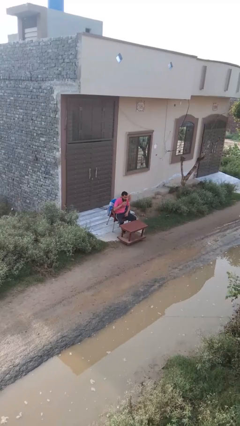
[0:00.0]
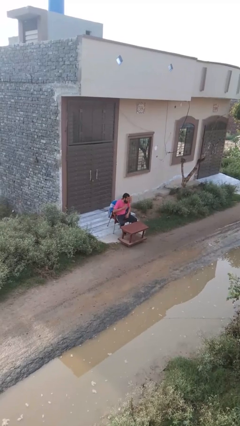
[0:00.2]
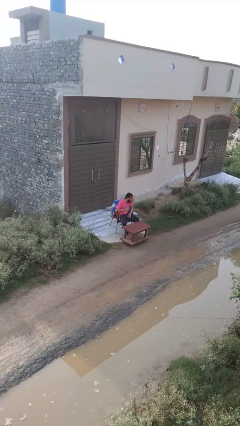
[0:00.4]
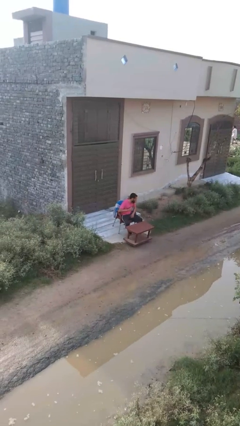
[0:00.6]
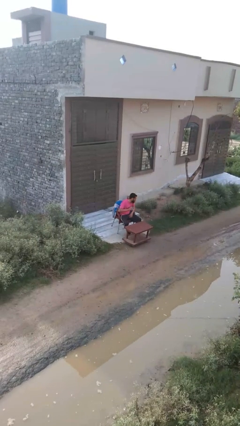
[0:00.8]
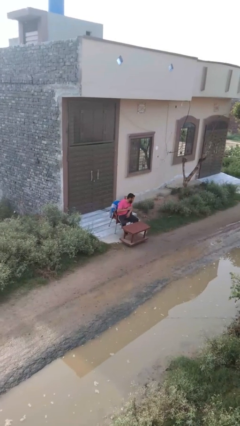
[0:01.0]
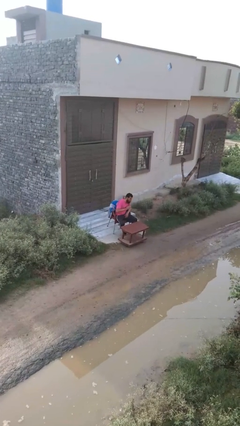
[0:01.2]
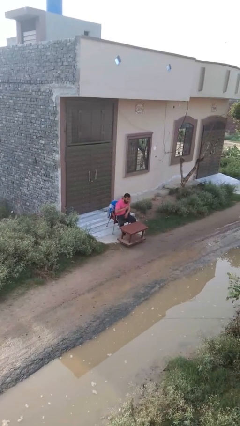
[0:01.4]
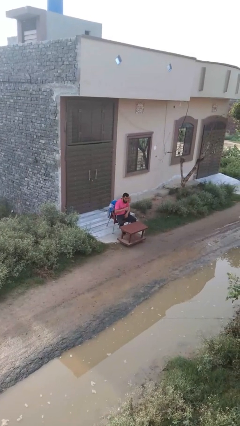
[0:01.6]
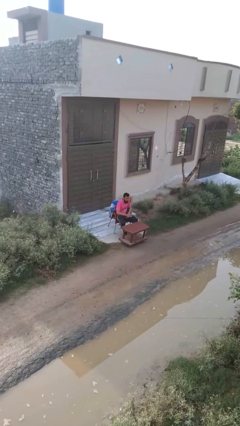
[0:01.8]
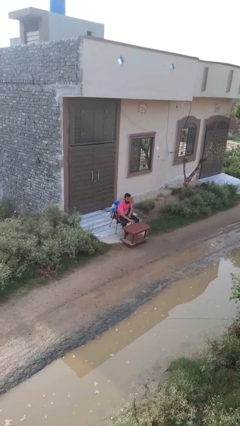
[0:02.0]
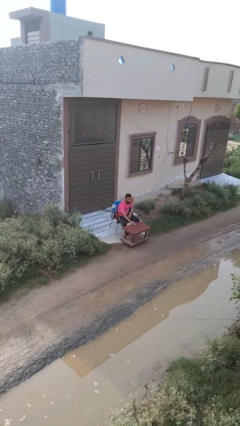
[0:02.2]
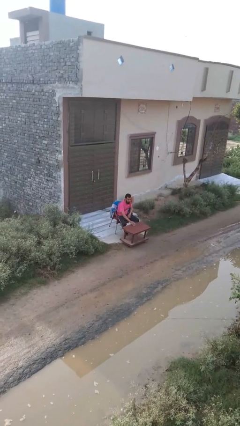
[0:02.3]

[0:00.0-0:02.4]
person puts down object on table

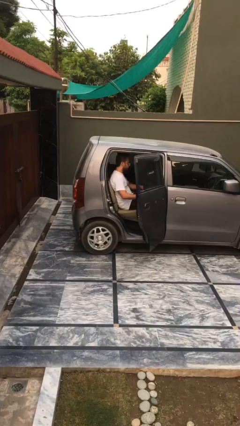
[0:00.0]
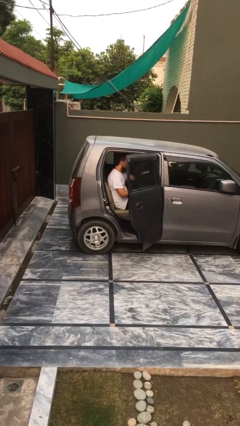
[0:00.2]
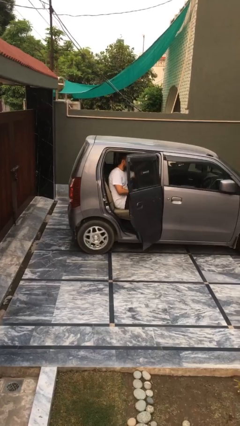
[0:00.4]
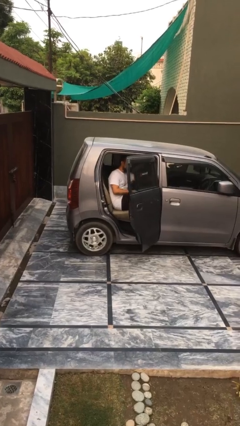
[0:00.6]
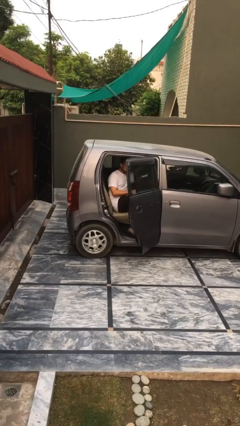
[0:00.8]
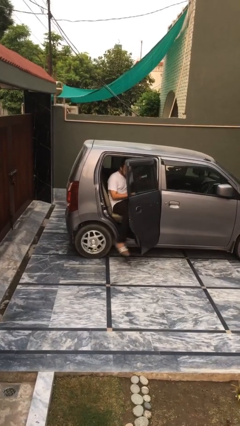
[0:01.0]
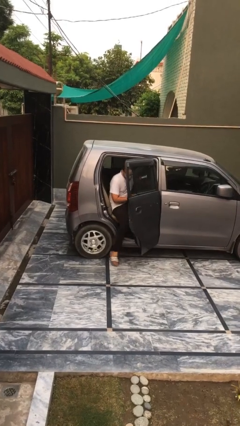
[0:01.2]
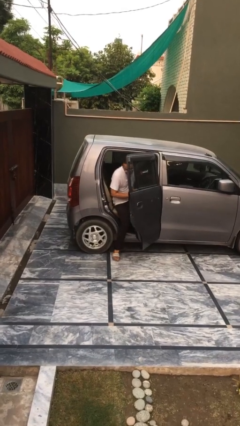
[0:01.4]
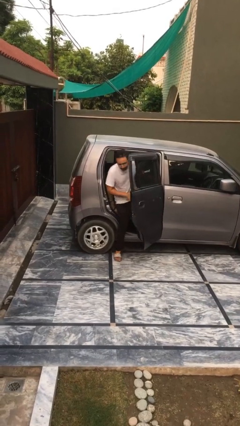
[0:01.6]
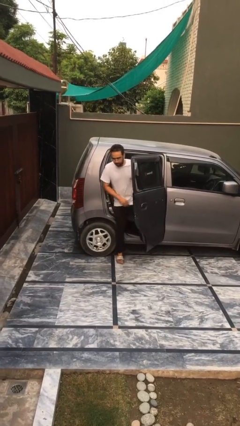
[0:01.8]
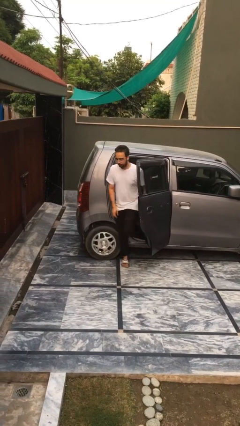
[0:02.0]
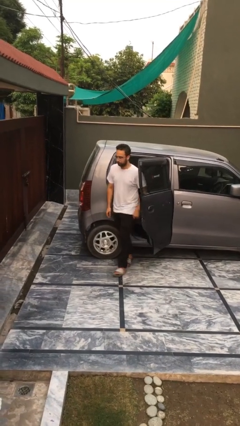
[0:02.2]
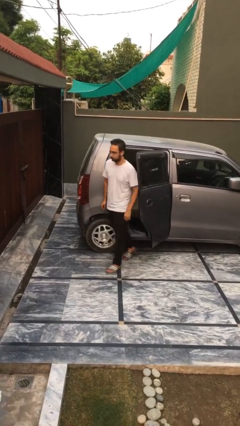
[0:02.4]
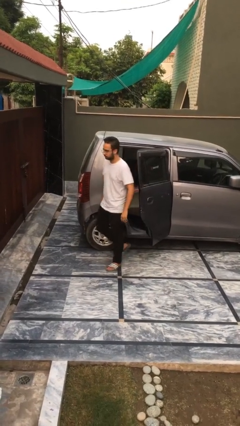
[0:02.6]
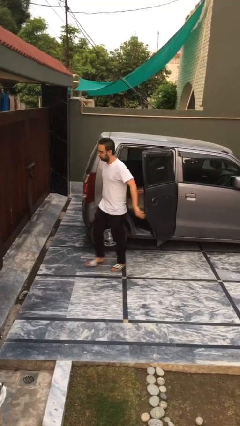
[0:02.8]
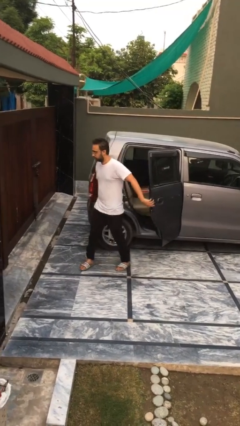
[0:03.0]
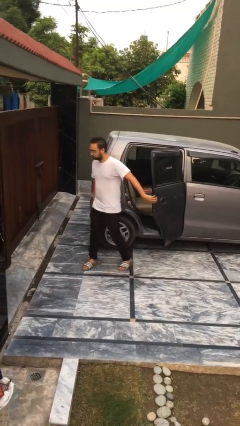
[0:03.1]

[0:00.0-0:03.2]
person exits car

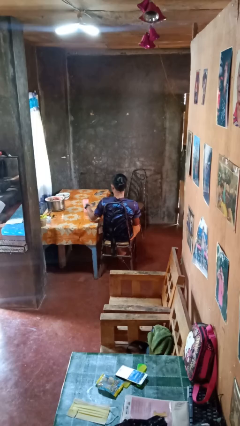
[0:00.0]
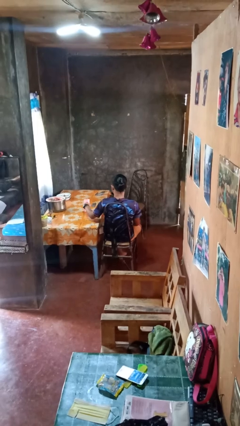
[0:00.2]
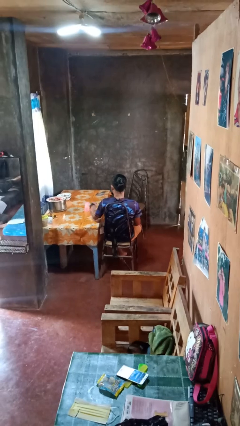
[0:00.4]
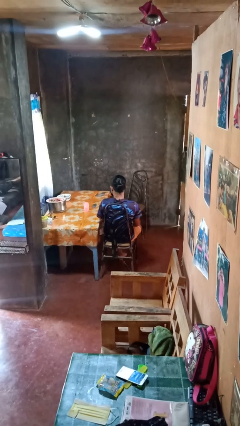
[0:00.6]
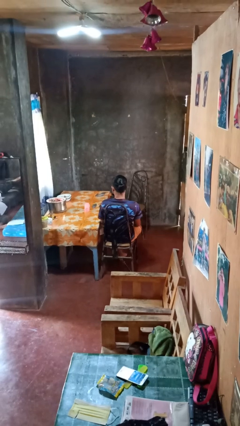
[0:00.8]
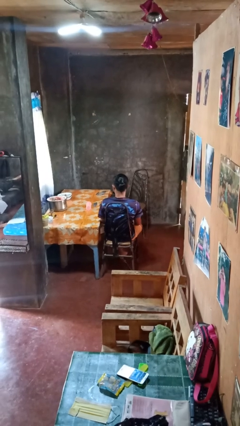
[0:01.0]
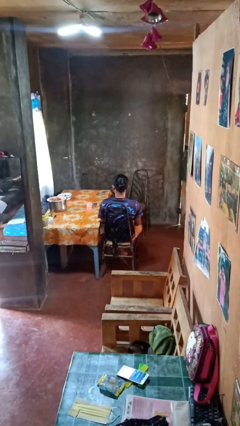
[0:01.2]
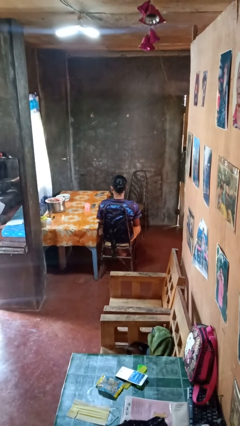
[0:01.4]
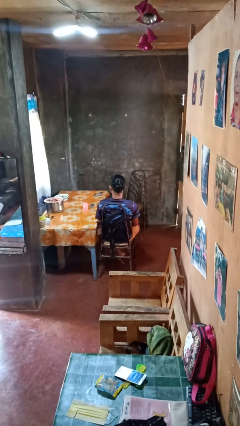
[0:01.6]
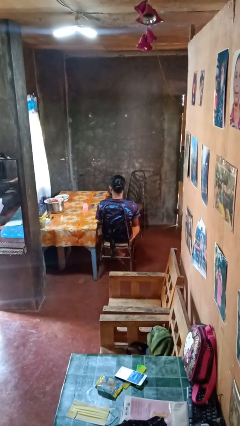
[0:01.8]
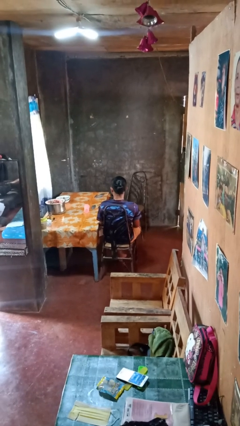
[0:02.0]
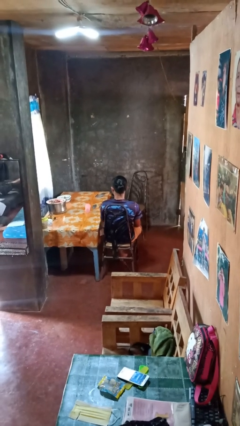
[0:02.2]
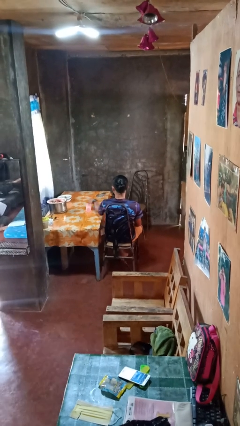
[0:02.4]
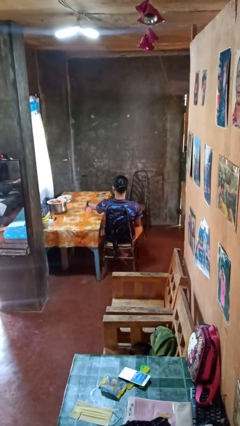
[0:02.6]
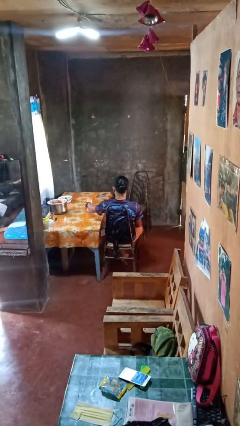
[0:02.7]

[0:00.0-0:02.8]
person knocks over glass

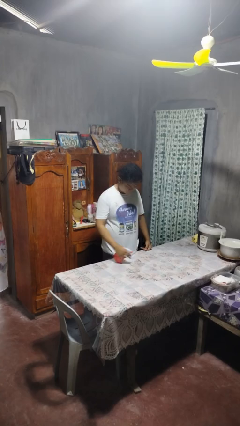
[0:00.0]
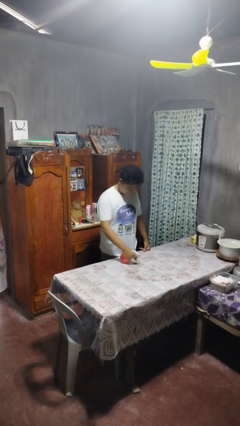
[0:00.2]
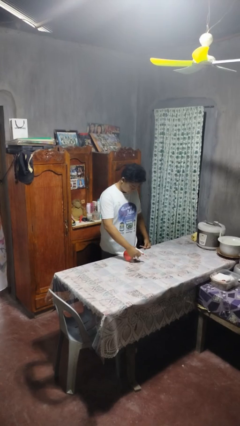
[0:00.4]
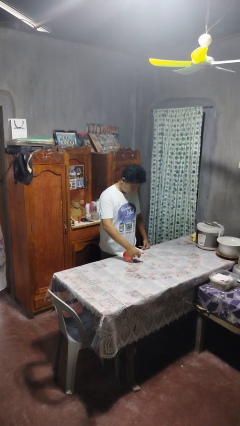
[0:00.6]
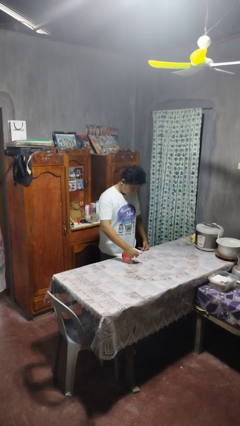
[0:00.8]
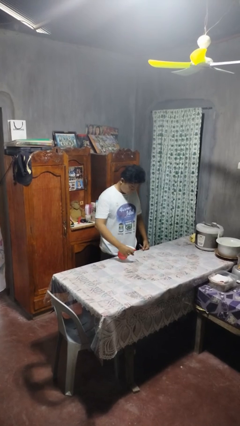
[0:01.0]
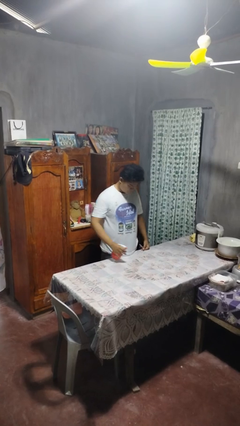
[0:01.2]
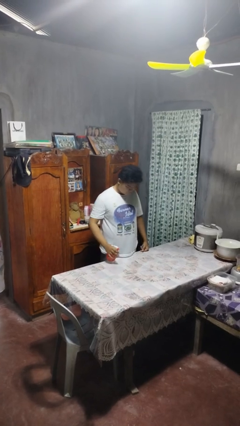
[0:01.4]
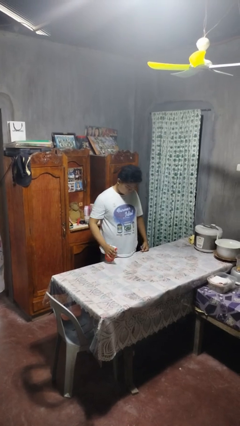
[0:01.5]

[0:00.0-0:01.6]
person sprays from bottle

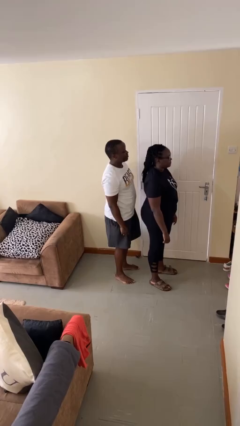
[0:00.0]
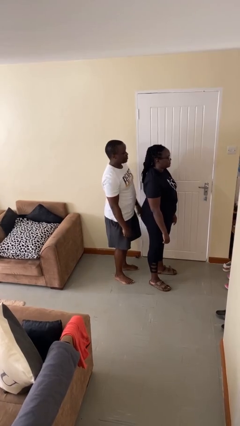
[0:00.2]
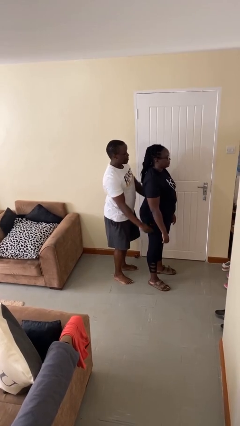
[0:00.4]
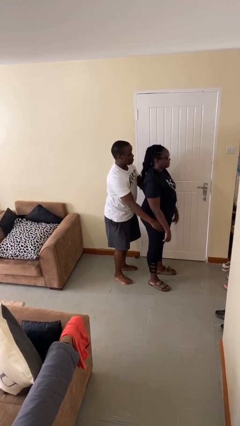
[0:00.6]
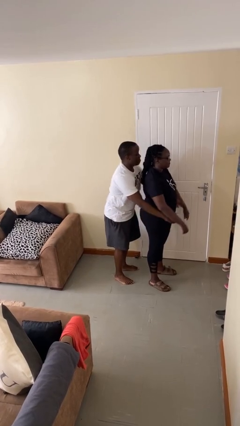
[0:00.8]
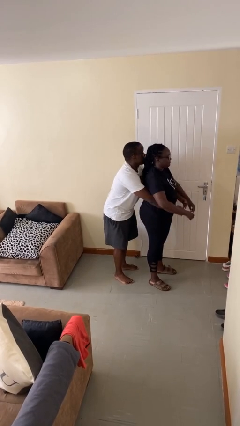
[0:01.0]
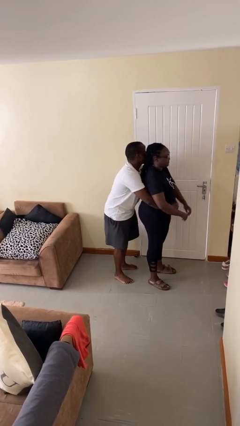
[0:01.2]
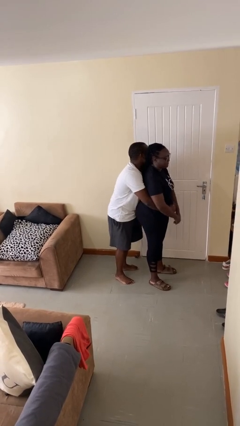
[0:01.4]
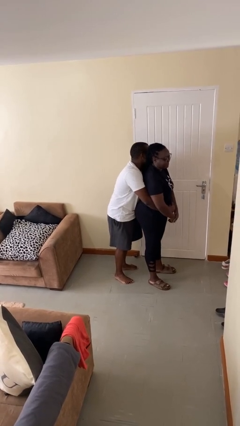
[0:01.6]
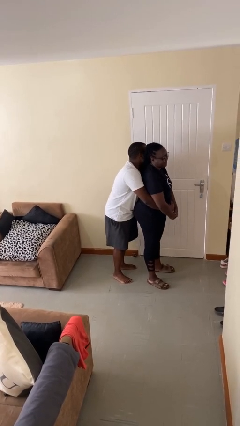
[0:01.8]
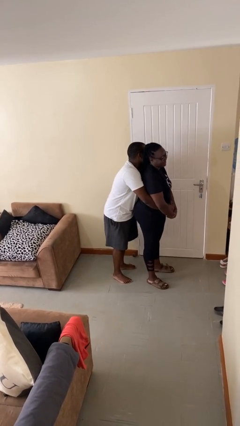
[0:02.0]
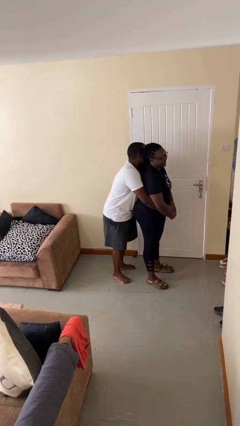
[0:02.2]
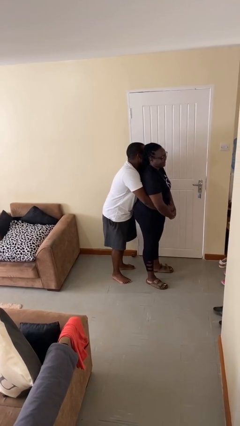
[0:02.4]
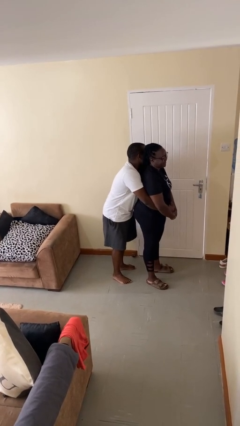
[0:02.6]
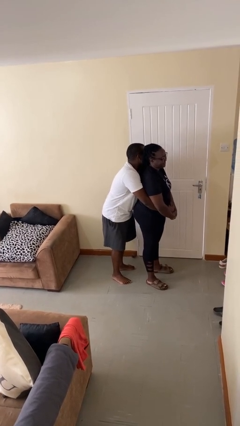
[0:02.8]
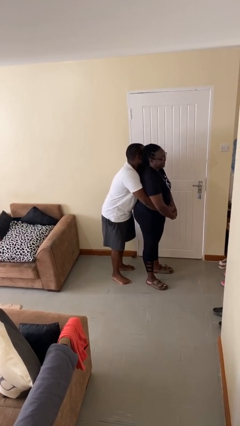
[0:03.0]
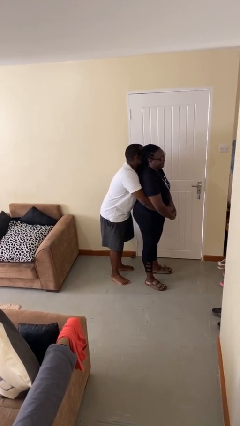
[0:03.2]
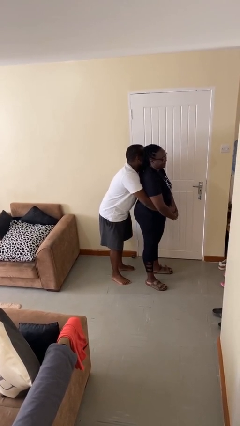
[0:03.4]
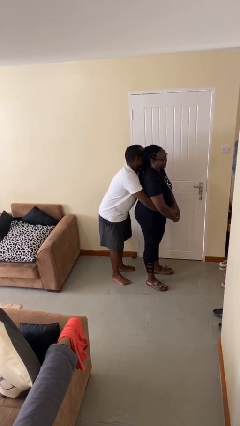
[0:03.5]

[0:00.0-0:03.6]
person hugs person from behind

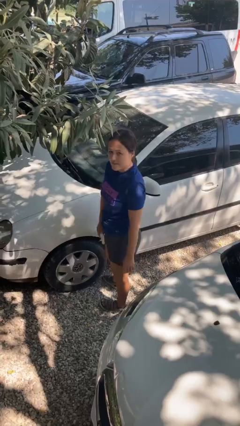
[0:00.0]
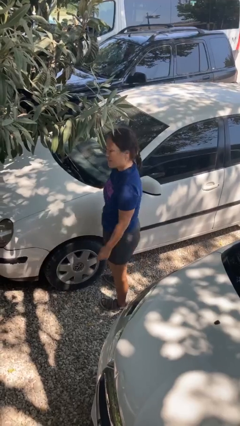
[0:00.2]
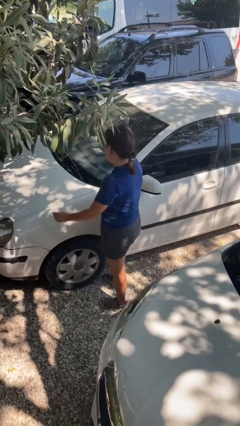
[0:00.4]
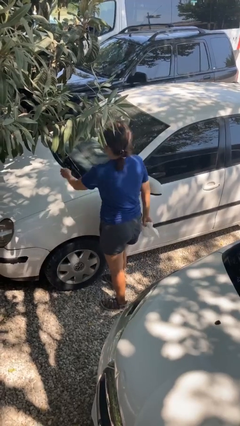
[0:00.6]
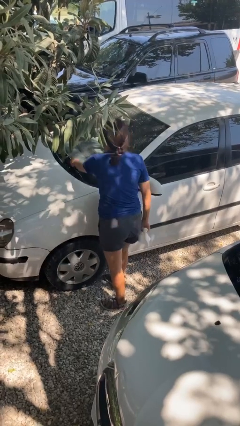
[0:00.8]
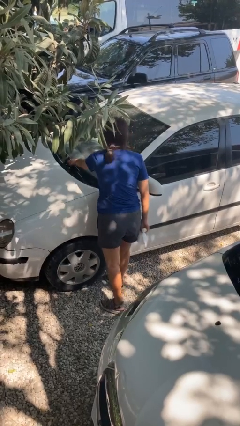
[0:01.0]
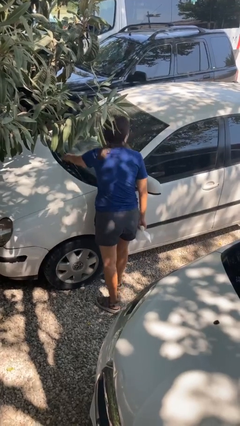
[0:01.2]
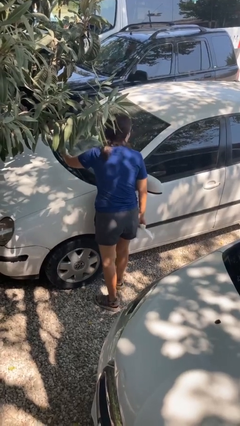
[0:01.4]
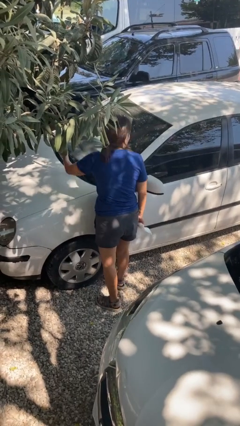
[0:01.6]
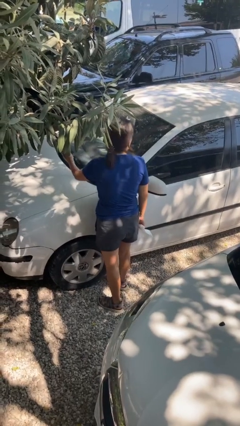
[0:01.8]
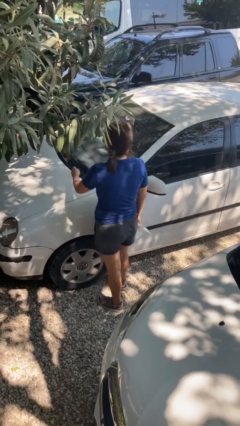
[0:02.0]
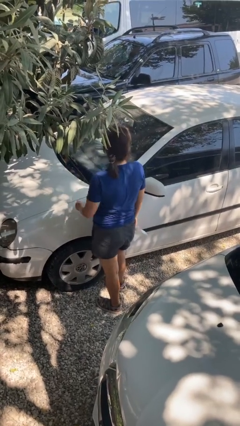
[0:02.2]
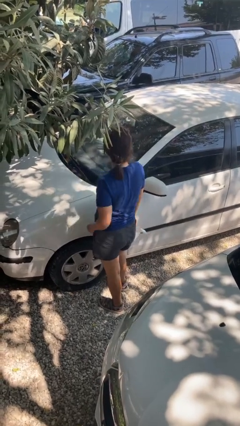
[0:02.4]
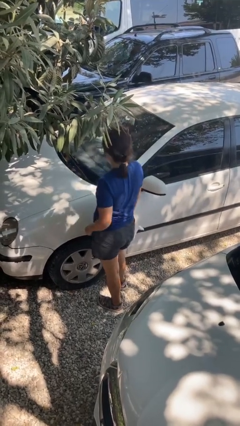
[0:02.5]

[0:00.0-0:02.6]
person flips up car wipers

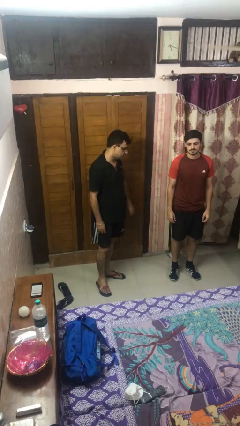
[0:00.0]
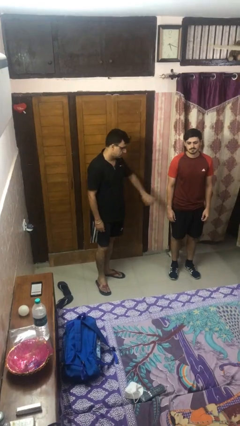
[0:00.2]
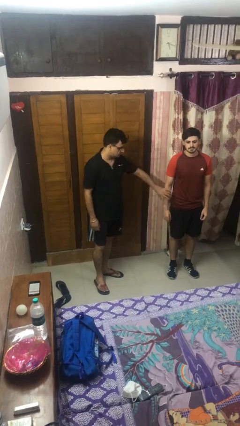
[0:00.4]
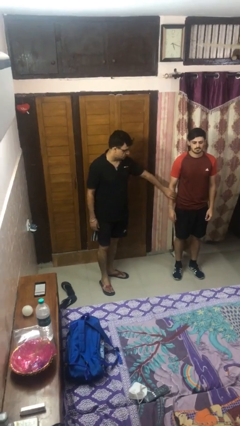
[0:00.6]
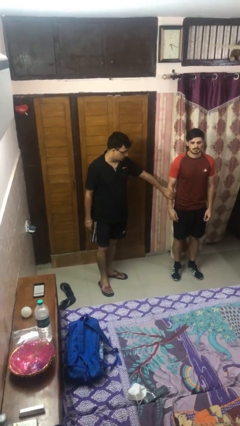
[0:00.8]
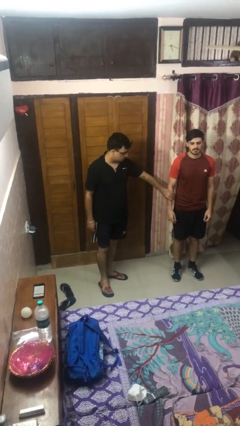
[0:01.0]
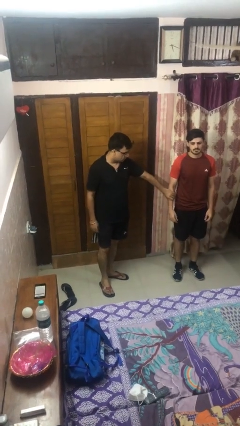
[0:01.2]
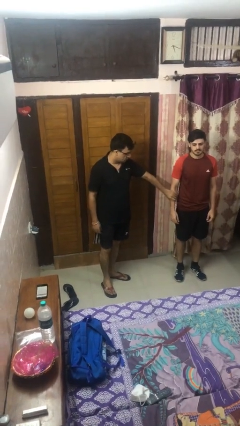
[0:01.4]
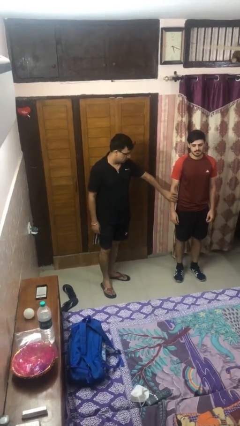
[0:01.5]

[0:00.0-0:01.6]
person grabs person by forearm
